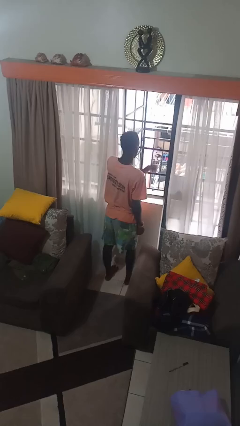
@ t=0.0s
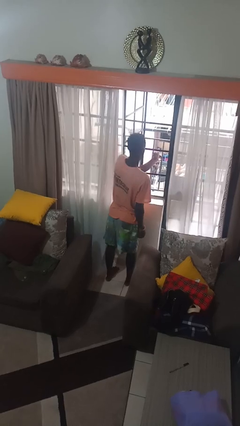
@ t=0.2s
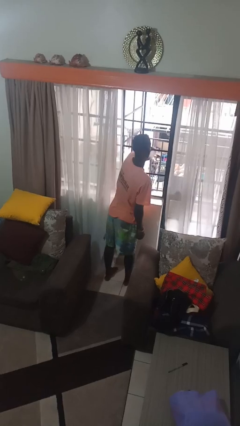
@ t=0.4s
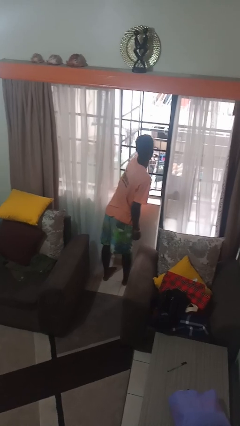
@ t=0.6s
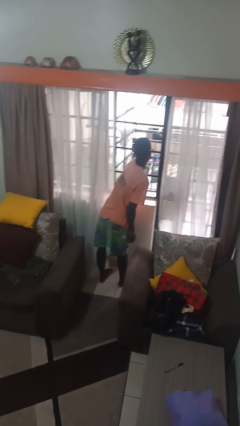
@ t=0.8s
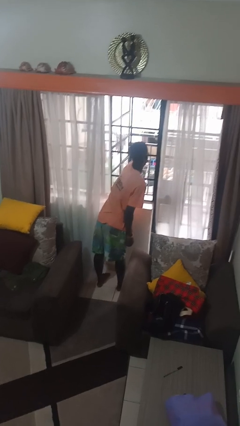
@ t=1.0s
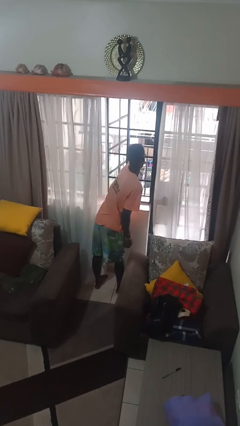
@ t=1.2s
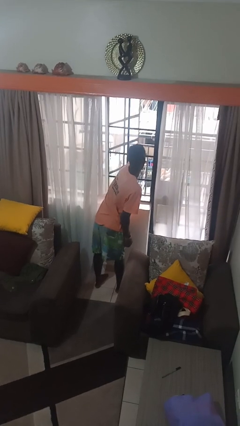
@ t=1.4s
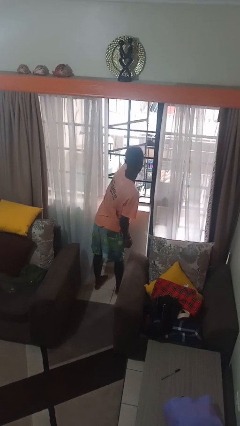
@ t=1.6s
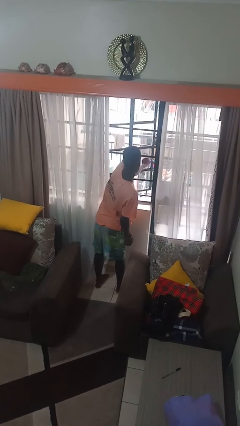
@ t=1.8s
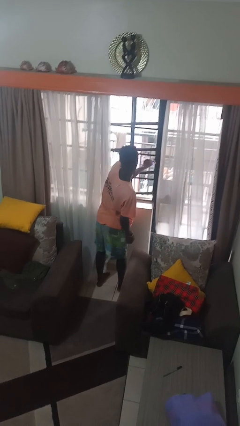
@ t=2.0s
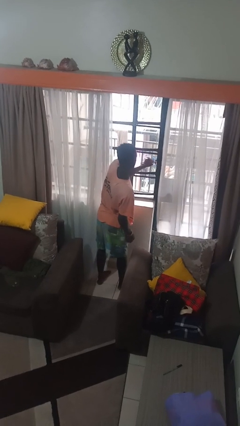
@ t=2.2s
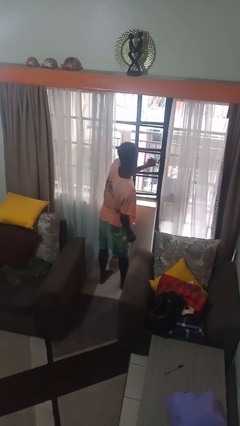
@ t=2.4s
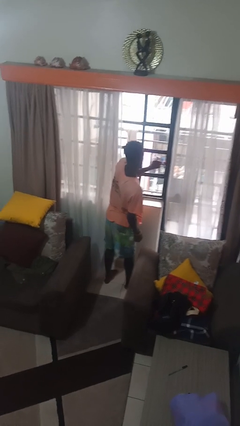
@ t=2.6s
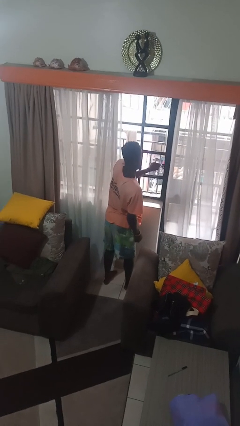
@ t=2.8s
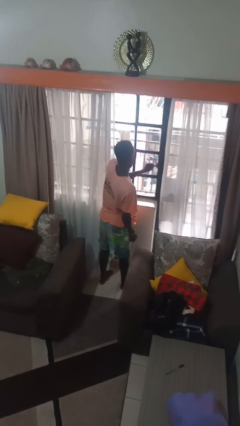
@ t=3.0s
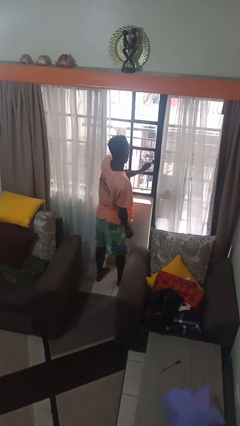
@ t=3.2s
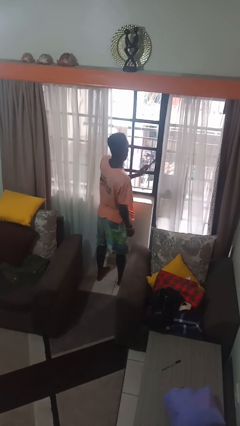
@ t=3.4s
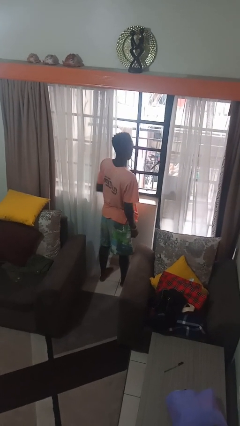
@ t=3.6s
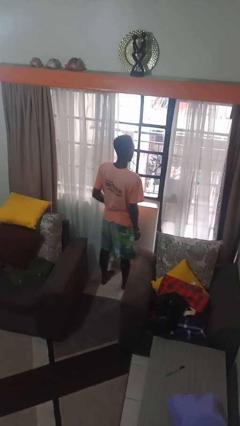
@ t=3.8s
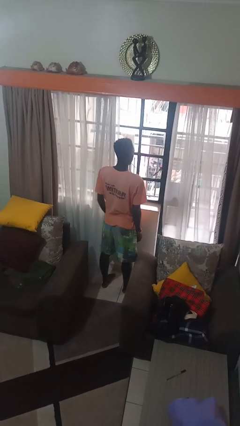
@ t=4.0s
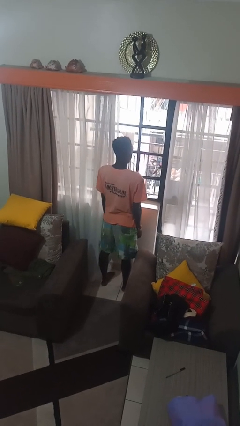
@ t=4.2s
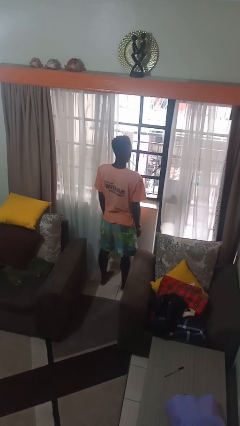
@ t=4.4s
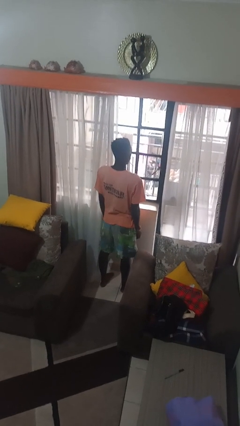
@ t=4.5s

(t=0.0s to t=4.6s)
person closes home window

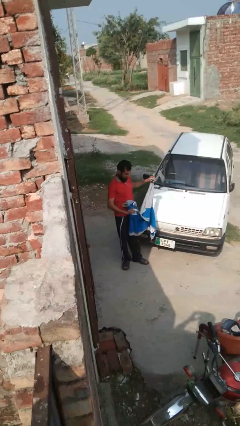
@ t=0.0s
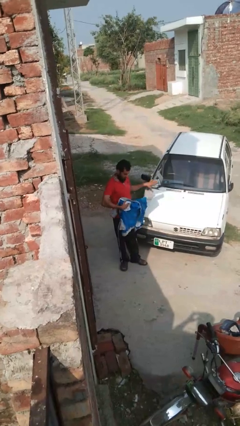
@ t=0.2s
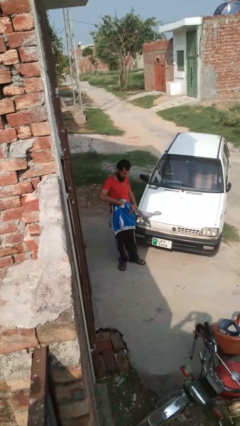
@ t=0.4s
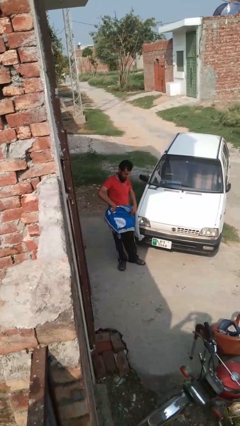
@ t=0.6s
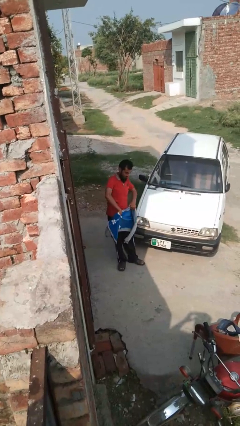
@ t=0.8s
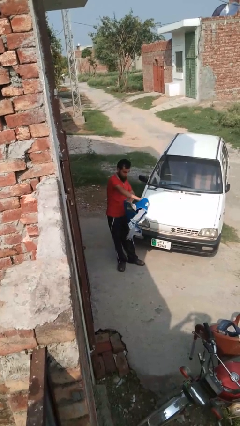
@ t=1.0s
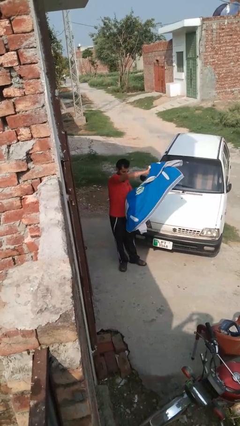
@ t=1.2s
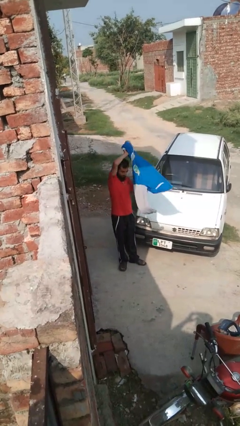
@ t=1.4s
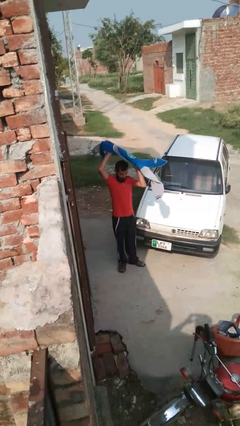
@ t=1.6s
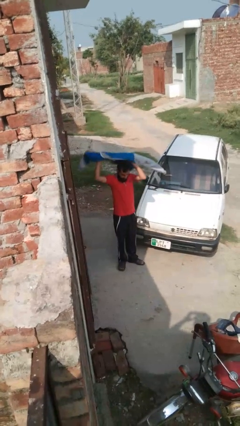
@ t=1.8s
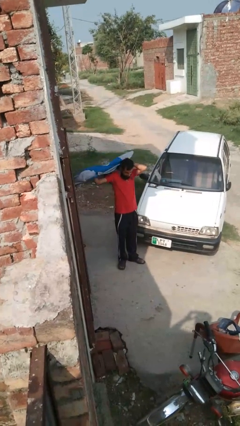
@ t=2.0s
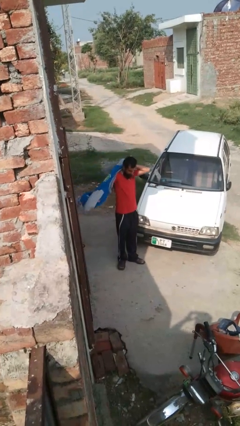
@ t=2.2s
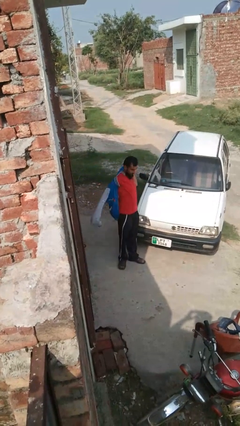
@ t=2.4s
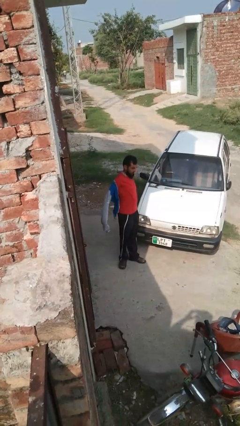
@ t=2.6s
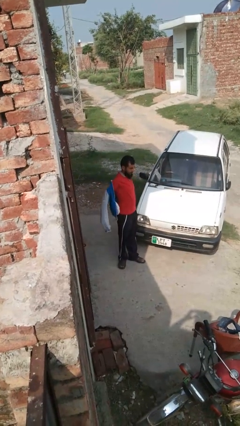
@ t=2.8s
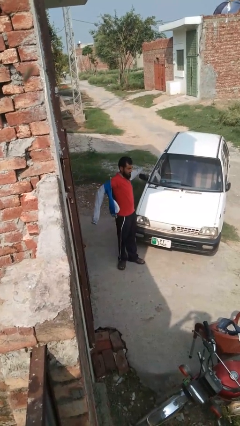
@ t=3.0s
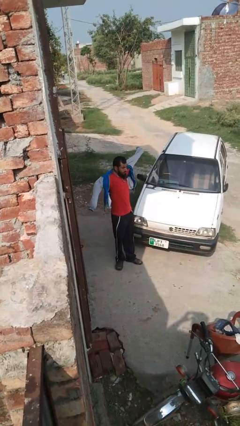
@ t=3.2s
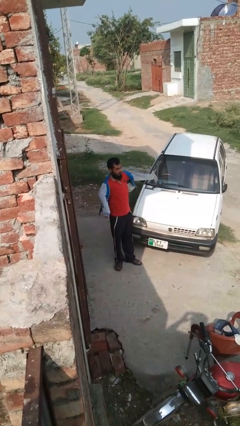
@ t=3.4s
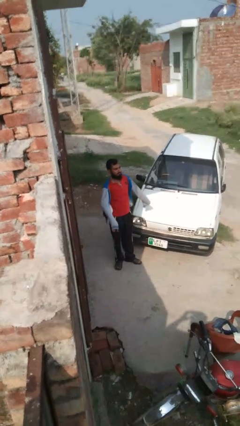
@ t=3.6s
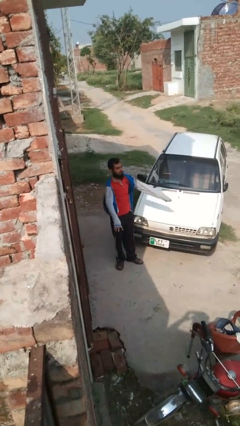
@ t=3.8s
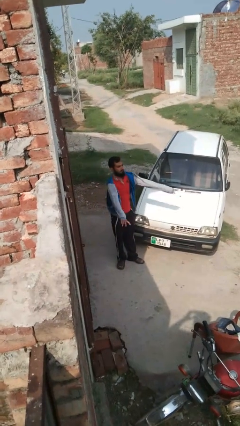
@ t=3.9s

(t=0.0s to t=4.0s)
person puts on jacket

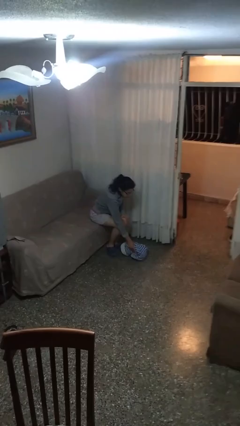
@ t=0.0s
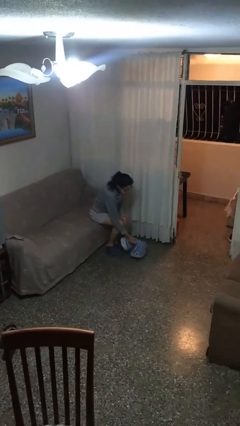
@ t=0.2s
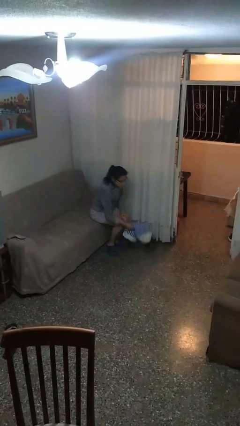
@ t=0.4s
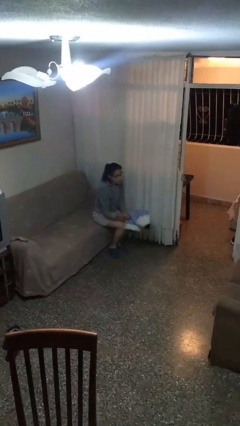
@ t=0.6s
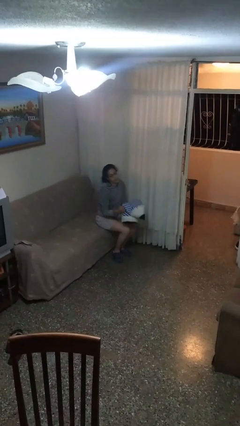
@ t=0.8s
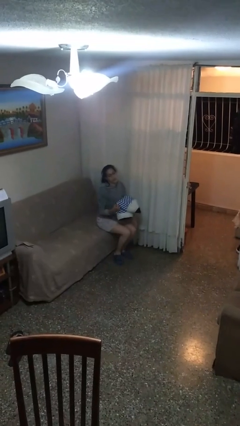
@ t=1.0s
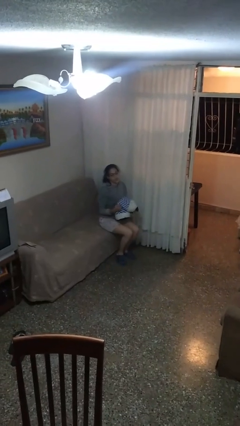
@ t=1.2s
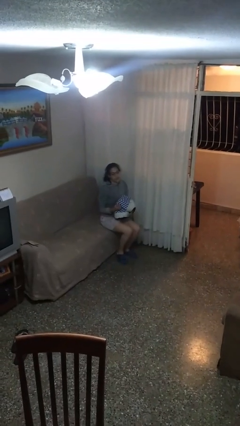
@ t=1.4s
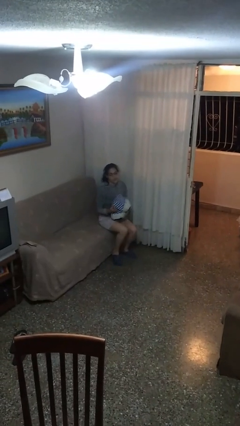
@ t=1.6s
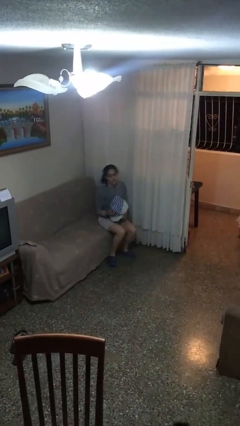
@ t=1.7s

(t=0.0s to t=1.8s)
person picks up object from floor

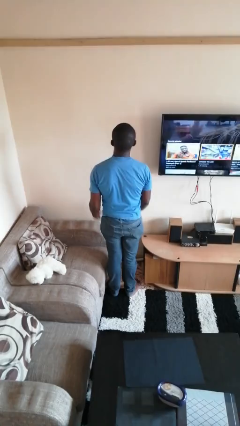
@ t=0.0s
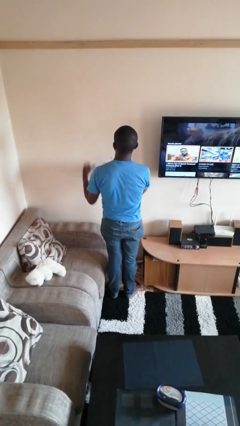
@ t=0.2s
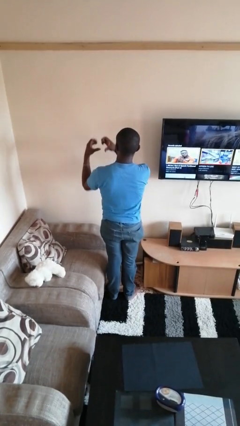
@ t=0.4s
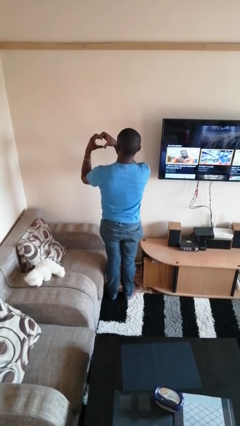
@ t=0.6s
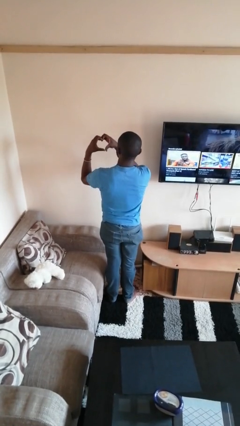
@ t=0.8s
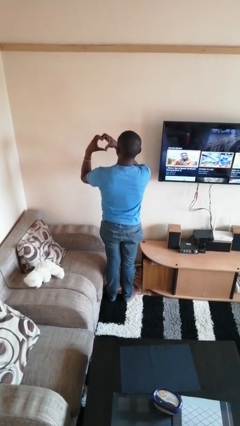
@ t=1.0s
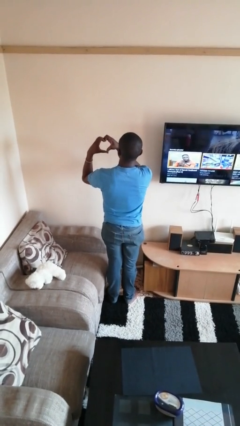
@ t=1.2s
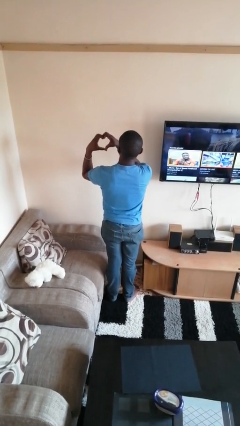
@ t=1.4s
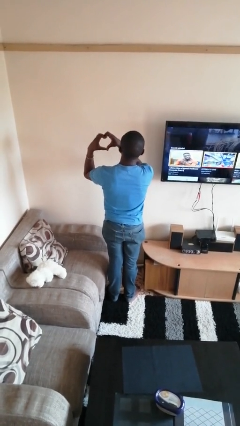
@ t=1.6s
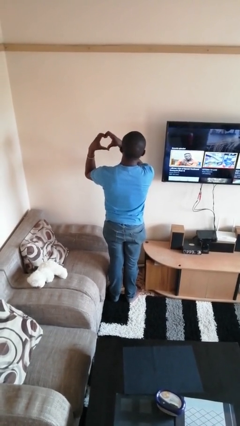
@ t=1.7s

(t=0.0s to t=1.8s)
person gestures heart

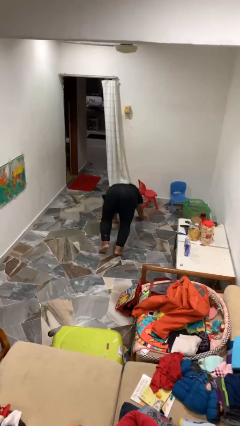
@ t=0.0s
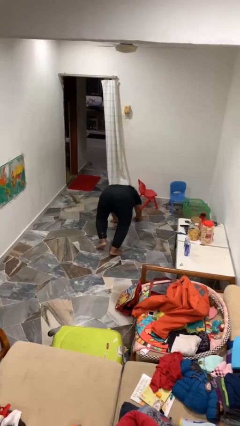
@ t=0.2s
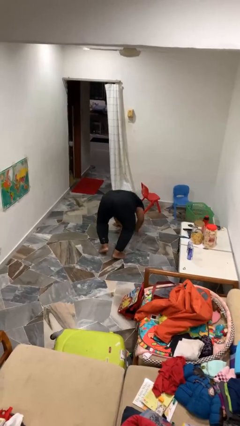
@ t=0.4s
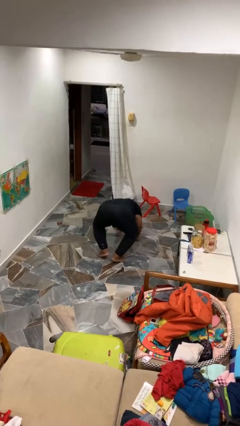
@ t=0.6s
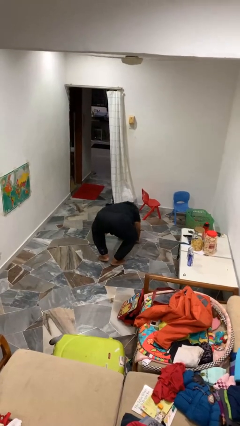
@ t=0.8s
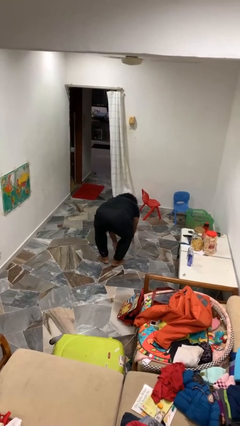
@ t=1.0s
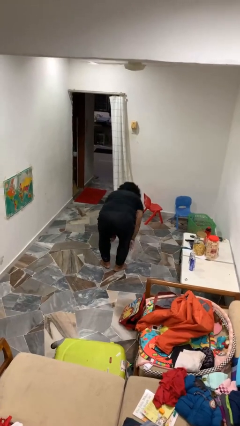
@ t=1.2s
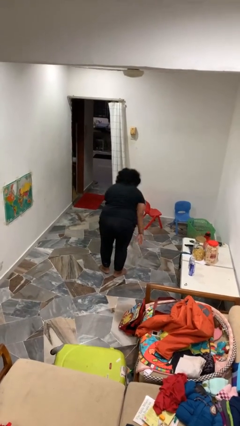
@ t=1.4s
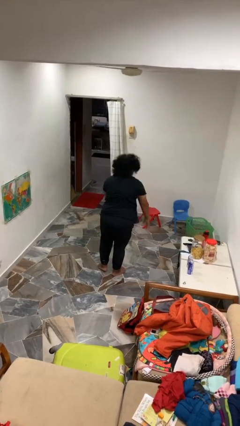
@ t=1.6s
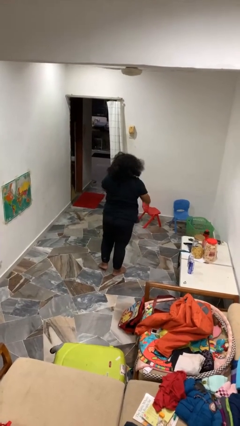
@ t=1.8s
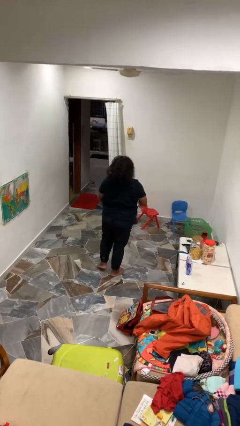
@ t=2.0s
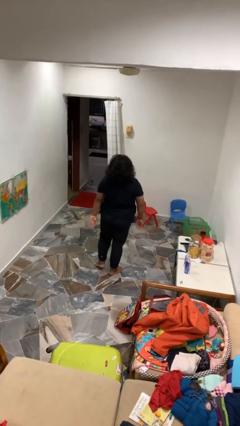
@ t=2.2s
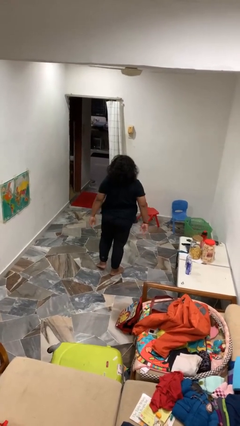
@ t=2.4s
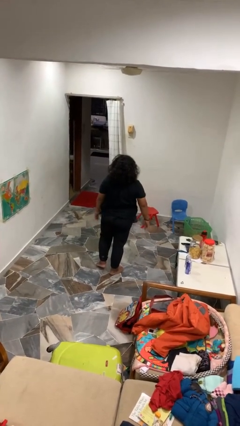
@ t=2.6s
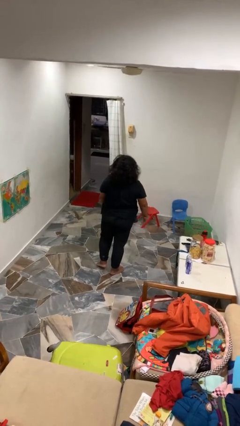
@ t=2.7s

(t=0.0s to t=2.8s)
person stands up from floor

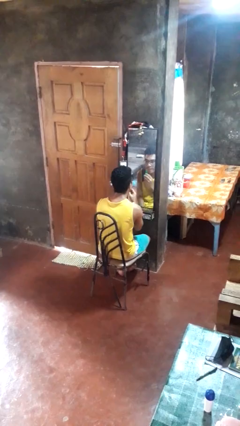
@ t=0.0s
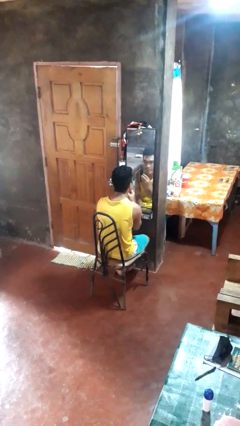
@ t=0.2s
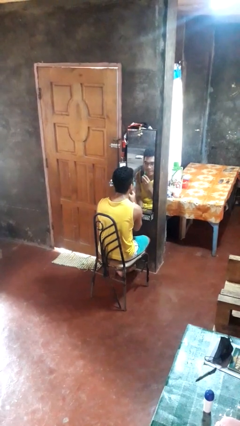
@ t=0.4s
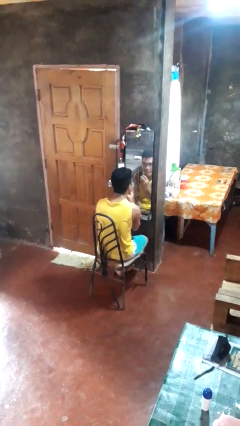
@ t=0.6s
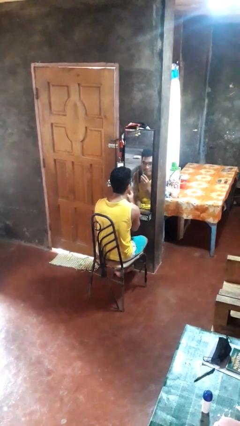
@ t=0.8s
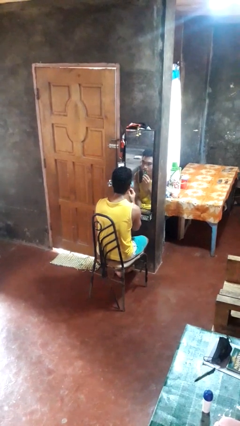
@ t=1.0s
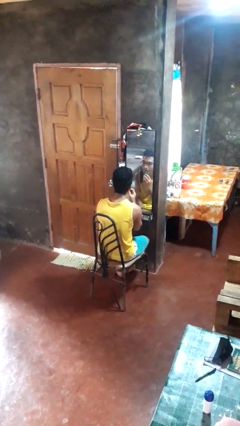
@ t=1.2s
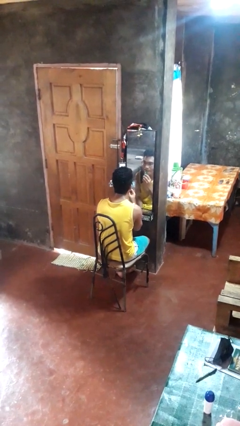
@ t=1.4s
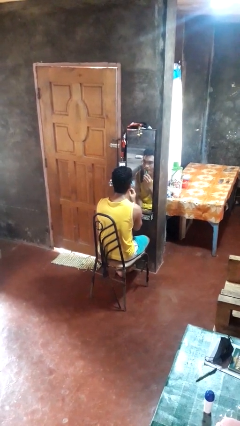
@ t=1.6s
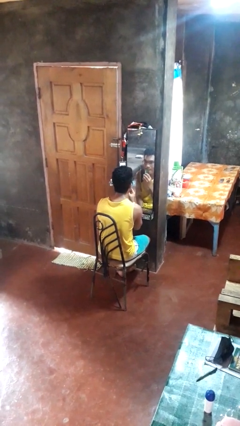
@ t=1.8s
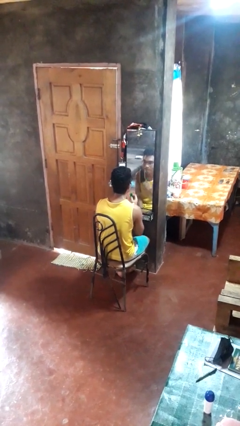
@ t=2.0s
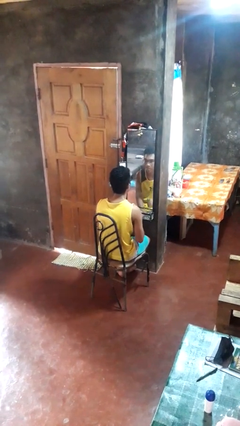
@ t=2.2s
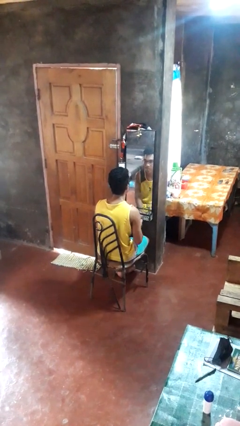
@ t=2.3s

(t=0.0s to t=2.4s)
person applies lip makeup
